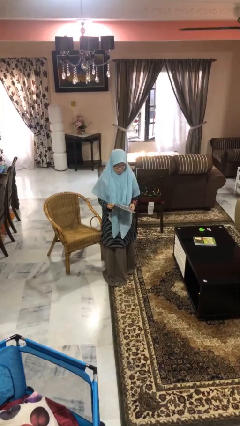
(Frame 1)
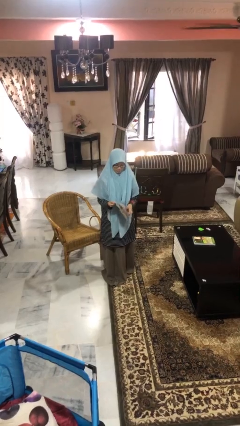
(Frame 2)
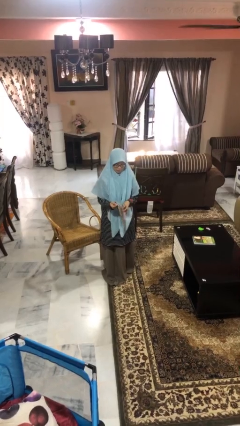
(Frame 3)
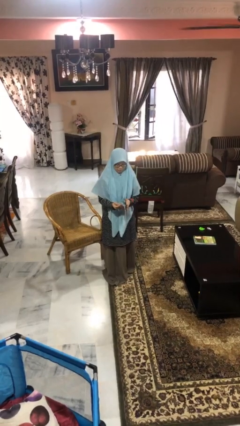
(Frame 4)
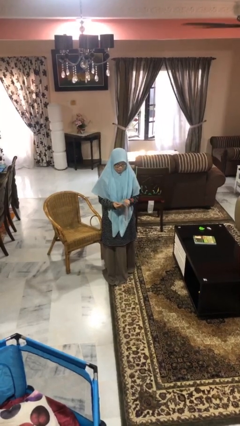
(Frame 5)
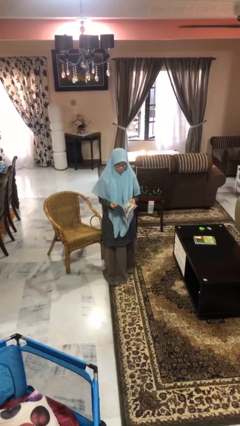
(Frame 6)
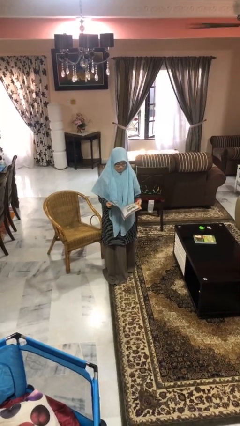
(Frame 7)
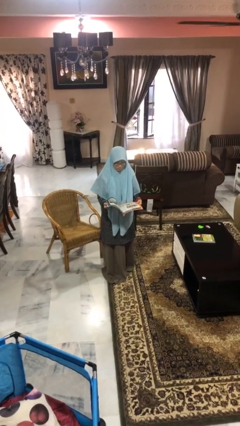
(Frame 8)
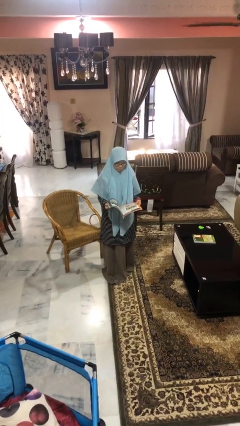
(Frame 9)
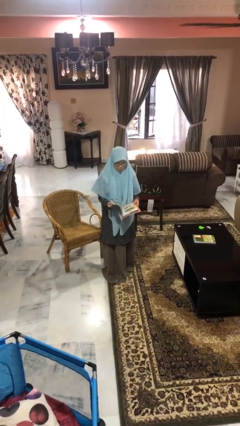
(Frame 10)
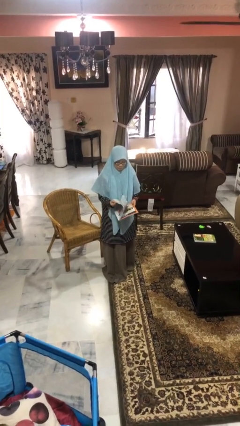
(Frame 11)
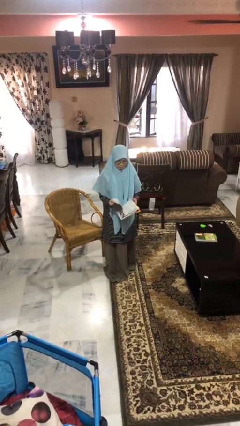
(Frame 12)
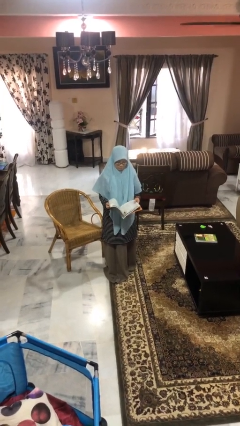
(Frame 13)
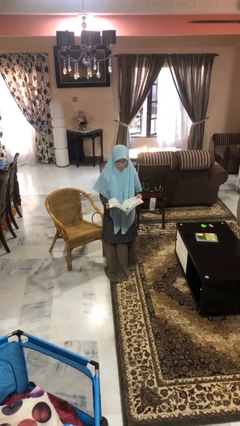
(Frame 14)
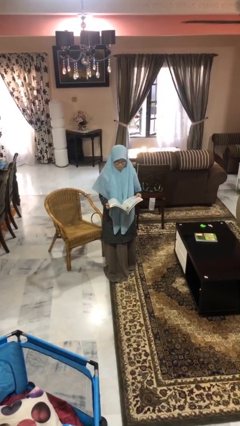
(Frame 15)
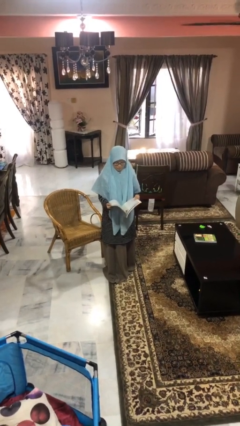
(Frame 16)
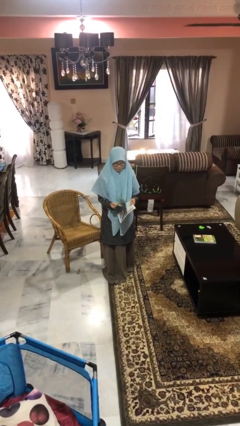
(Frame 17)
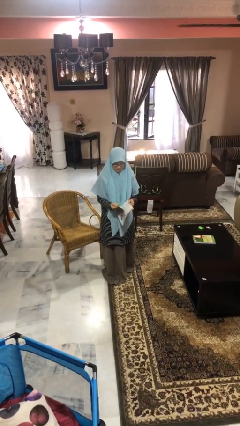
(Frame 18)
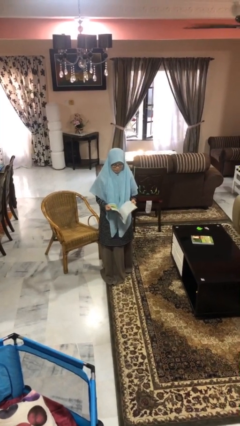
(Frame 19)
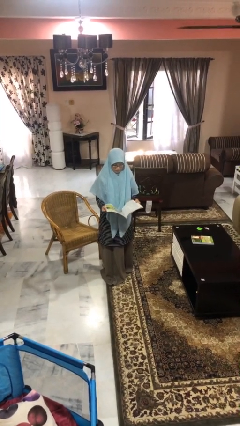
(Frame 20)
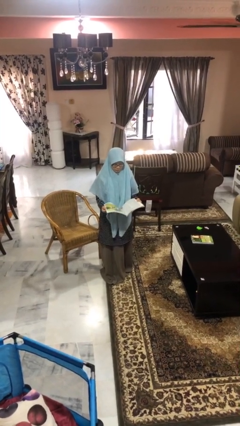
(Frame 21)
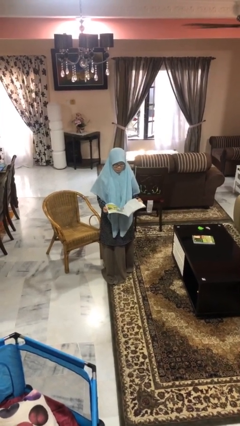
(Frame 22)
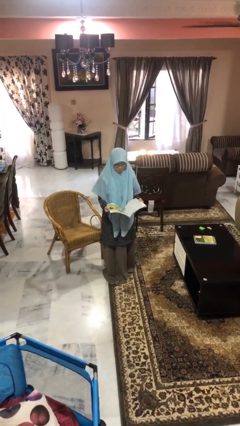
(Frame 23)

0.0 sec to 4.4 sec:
person reads magazine

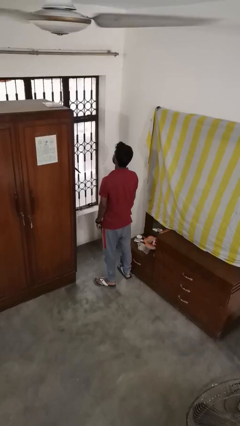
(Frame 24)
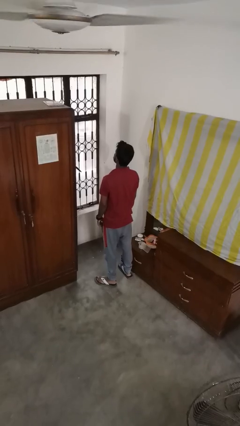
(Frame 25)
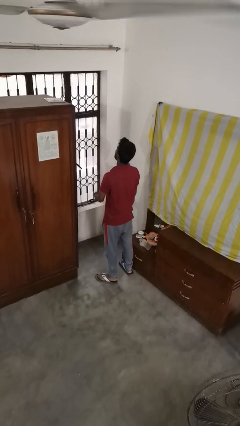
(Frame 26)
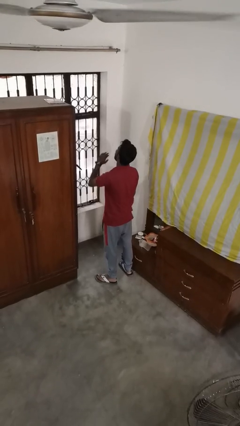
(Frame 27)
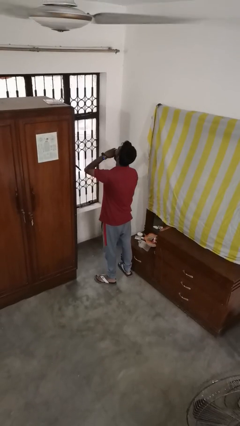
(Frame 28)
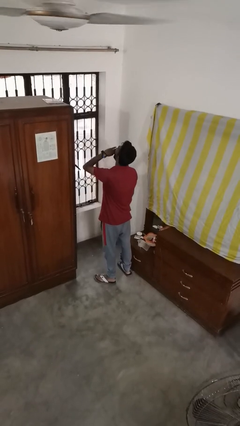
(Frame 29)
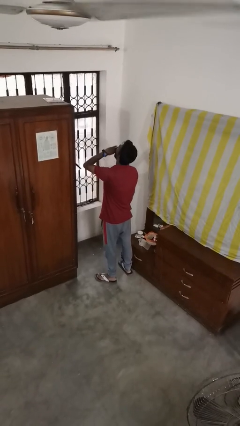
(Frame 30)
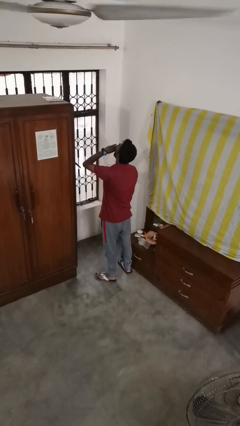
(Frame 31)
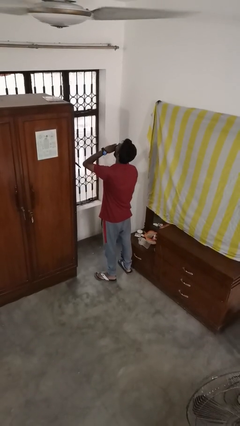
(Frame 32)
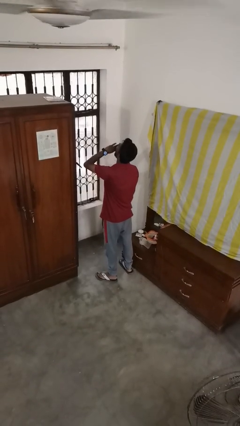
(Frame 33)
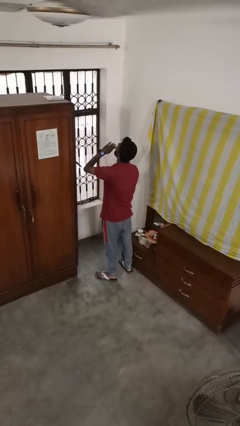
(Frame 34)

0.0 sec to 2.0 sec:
person yawns

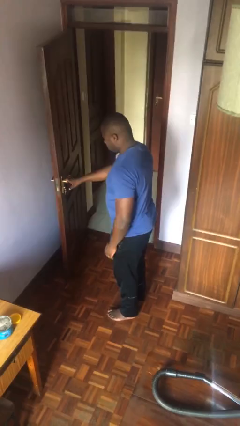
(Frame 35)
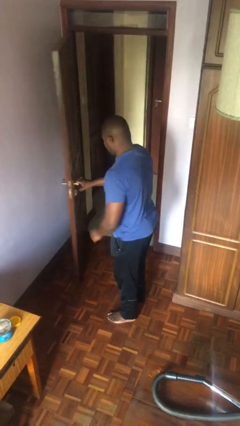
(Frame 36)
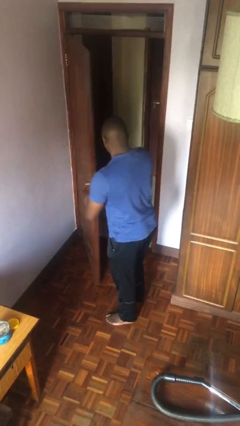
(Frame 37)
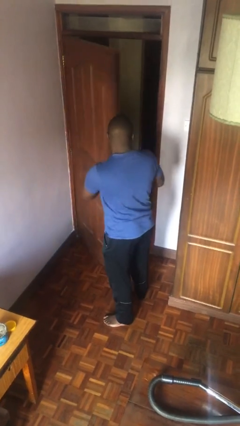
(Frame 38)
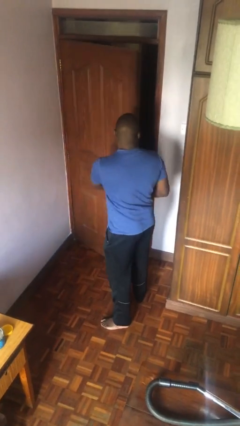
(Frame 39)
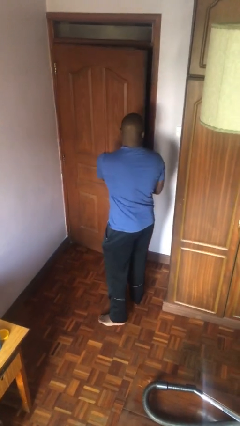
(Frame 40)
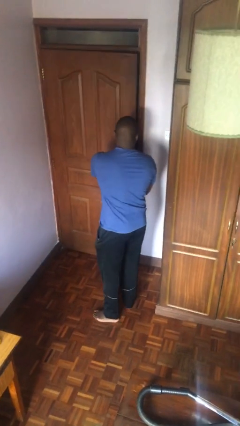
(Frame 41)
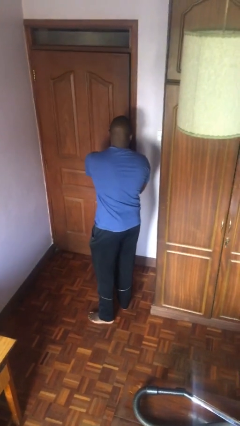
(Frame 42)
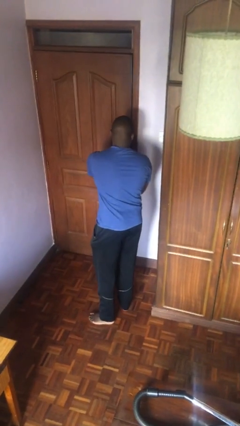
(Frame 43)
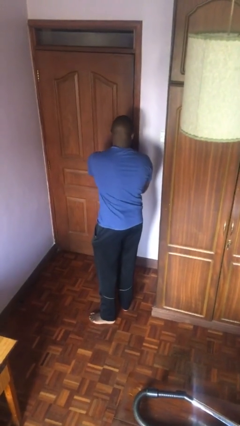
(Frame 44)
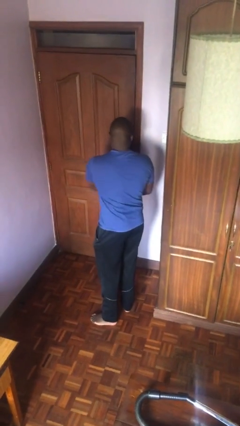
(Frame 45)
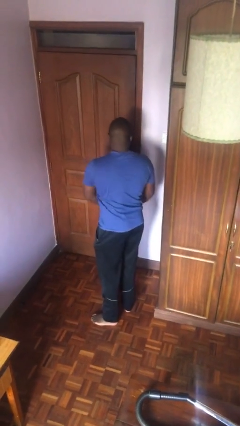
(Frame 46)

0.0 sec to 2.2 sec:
person closes facility door

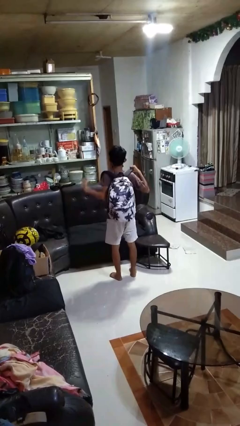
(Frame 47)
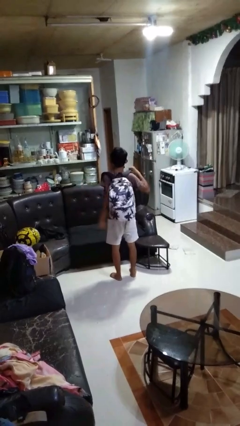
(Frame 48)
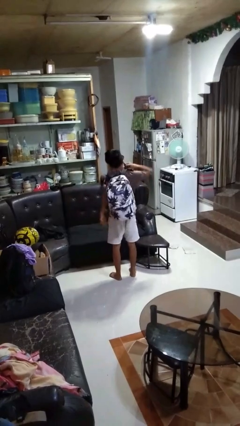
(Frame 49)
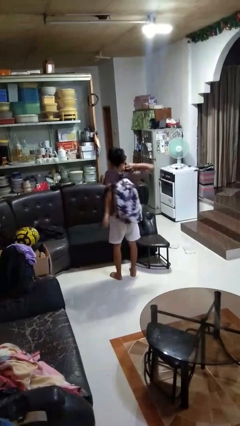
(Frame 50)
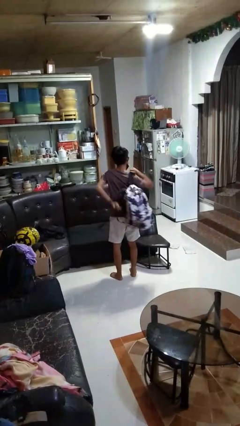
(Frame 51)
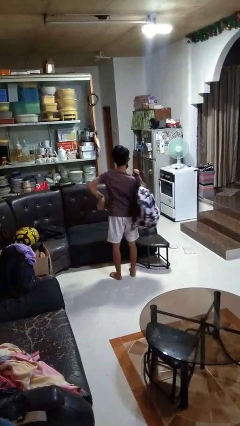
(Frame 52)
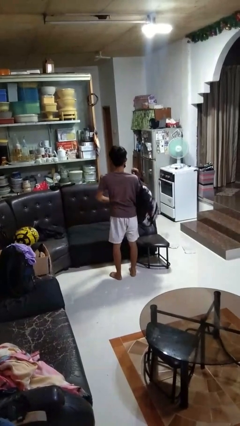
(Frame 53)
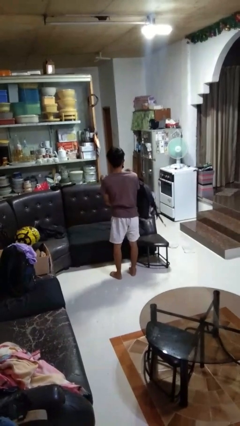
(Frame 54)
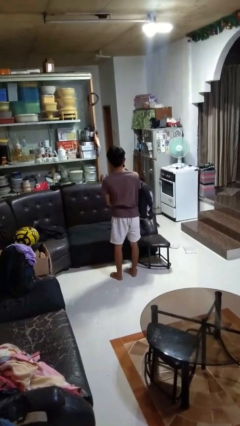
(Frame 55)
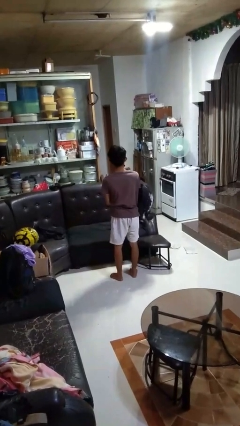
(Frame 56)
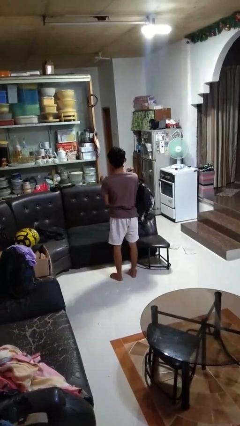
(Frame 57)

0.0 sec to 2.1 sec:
person takes off backpack

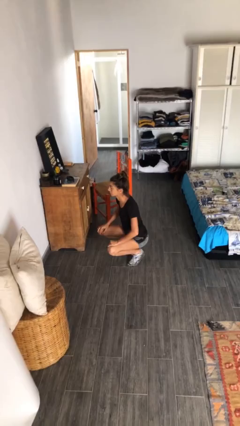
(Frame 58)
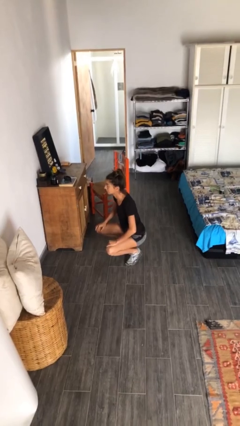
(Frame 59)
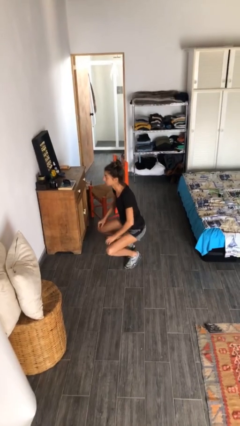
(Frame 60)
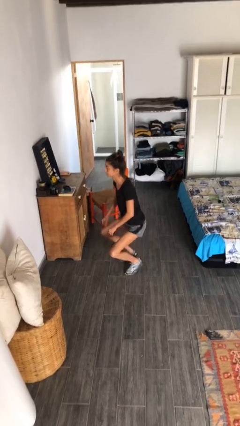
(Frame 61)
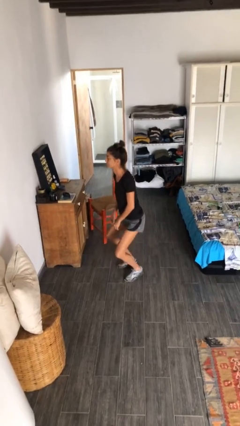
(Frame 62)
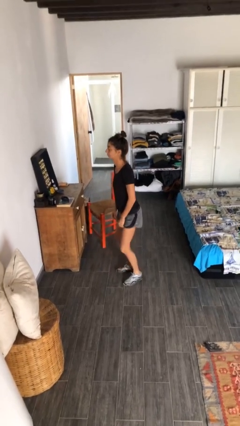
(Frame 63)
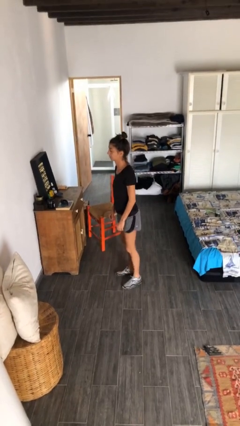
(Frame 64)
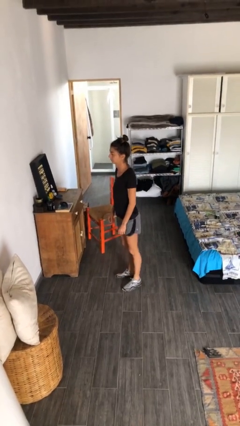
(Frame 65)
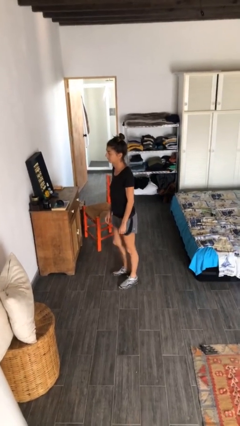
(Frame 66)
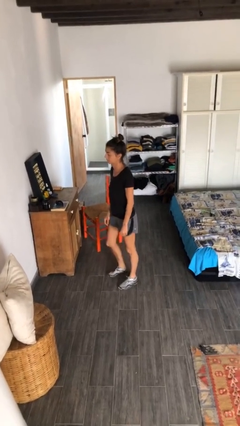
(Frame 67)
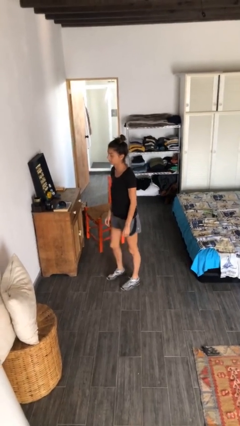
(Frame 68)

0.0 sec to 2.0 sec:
person stands up

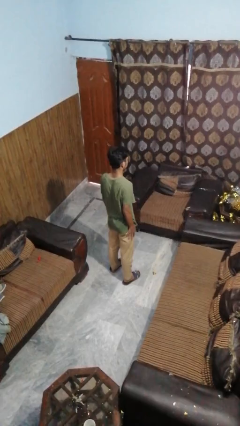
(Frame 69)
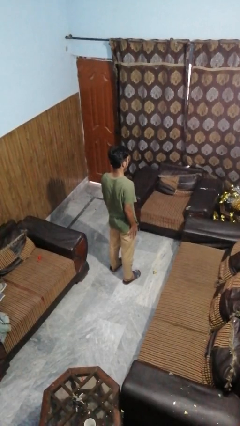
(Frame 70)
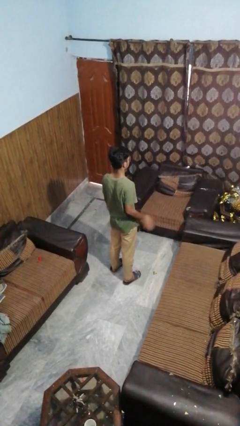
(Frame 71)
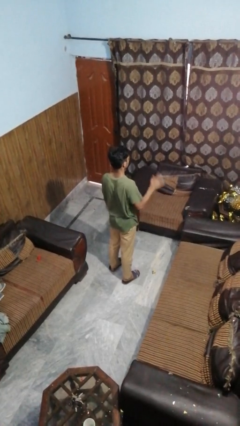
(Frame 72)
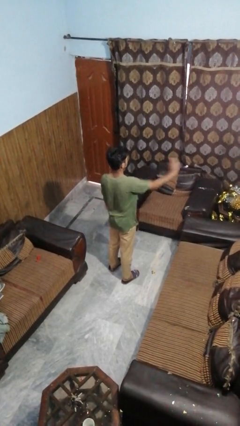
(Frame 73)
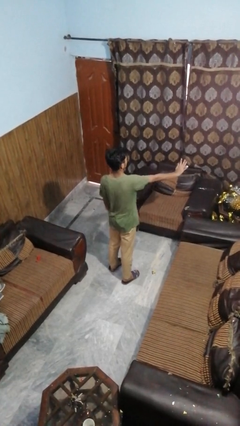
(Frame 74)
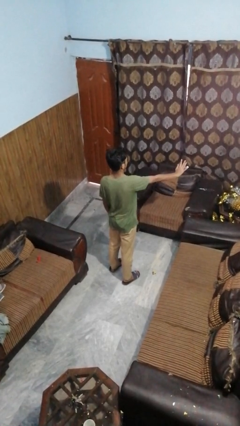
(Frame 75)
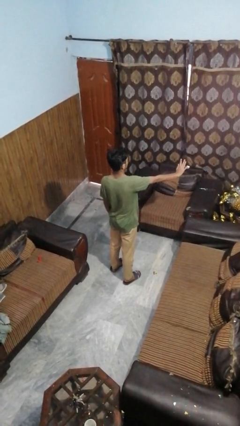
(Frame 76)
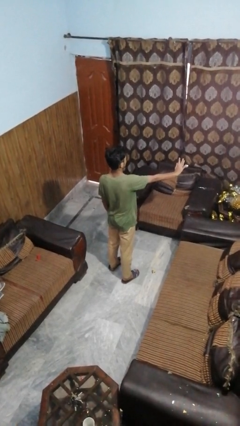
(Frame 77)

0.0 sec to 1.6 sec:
person gestures stop

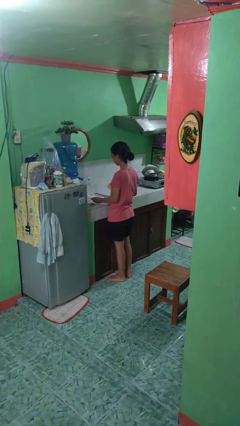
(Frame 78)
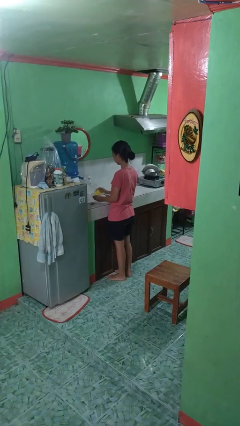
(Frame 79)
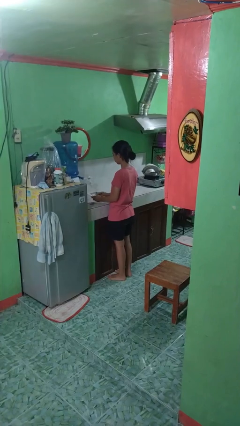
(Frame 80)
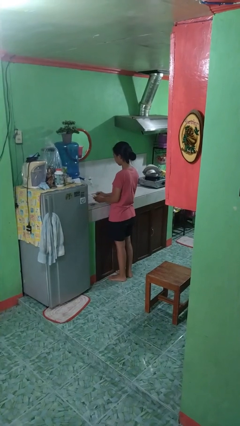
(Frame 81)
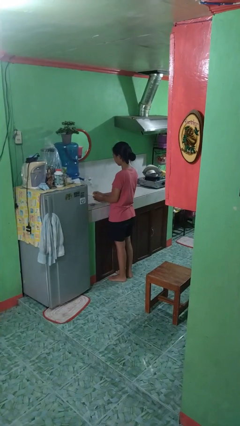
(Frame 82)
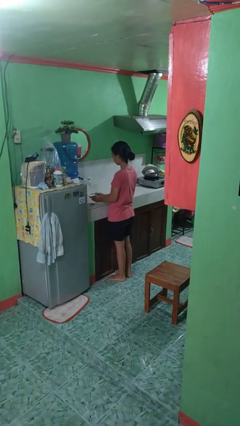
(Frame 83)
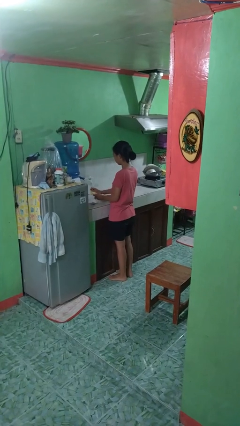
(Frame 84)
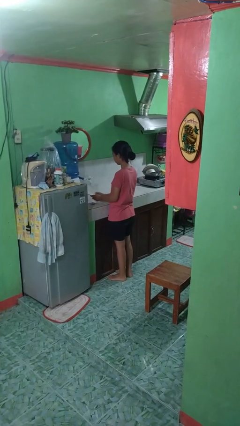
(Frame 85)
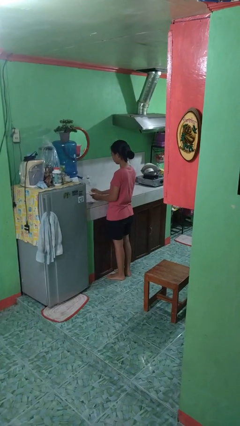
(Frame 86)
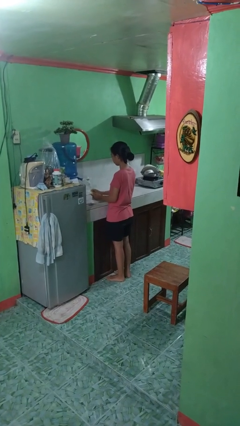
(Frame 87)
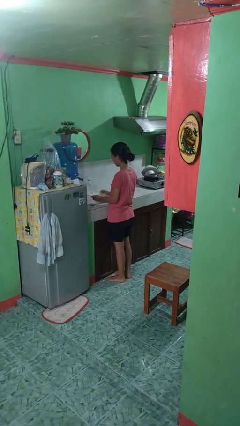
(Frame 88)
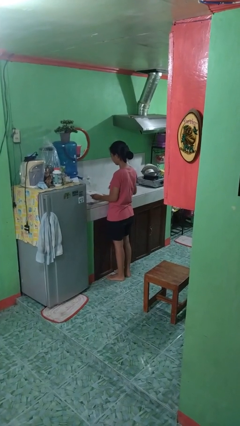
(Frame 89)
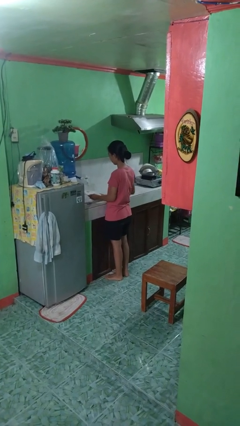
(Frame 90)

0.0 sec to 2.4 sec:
person washes dish

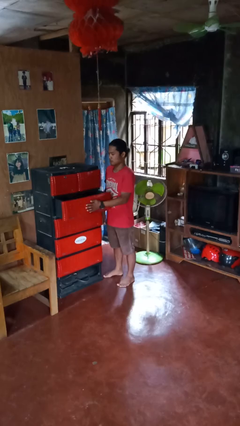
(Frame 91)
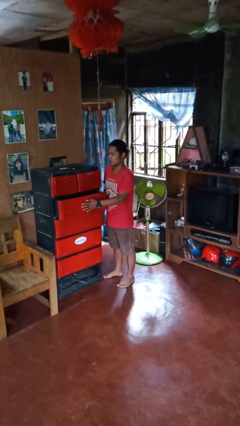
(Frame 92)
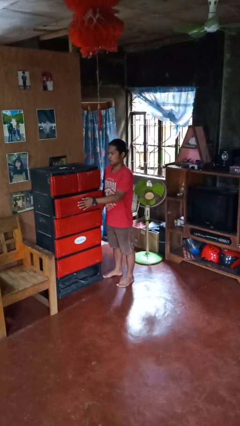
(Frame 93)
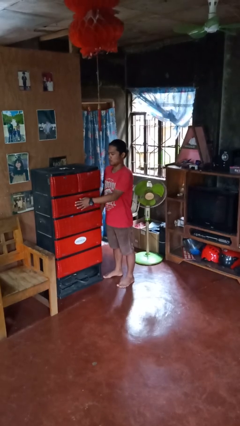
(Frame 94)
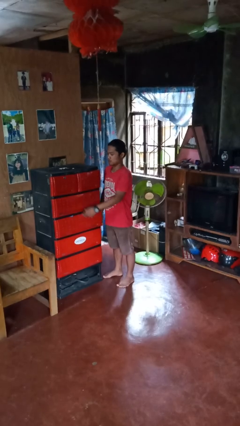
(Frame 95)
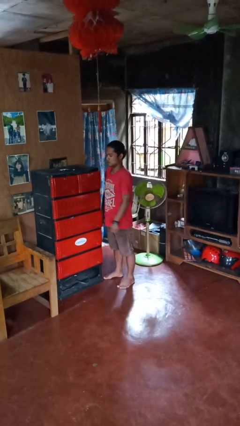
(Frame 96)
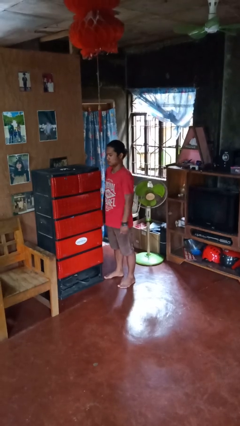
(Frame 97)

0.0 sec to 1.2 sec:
person closes dresser drawer
